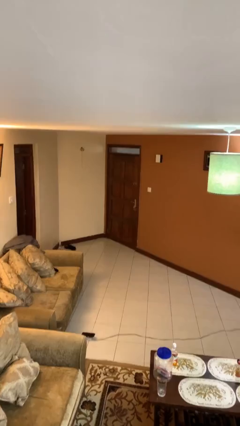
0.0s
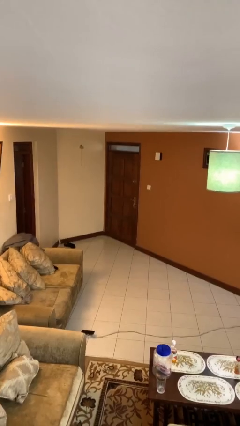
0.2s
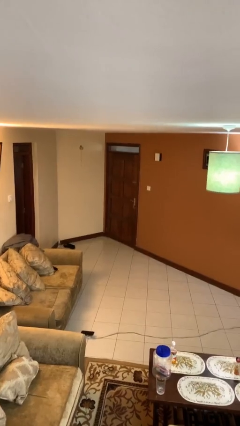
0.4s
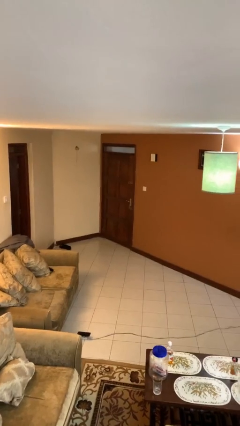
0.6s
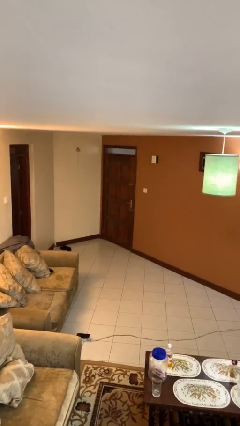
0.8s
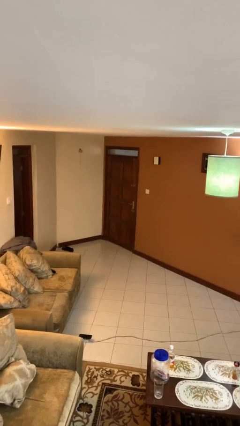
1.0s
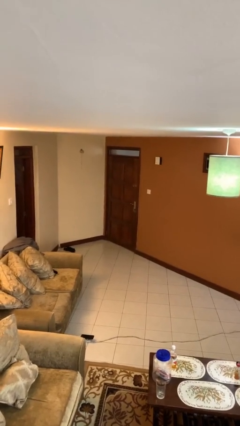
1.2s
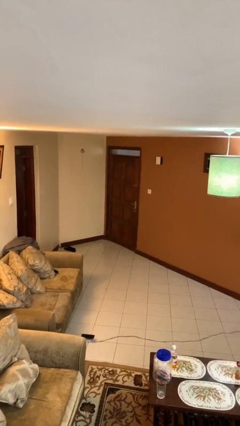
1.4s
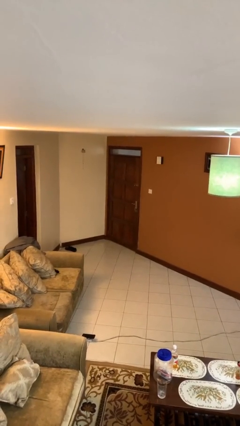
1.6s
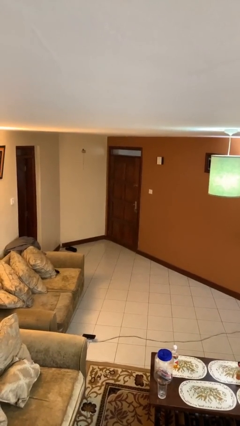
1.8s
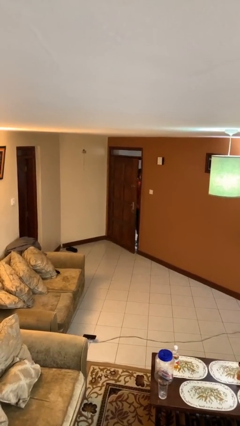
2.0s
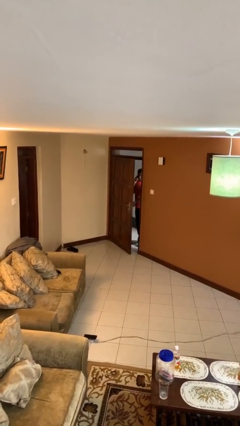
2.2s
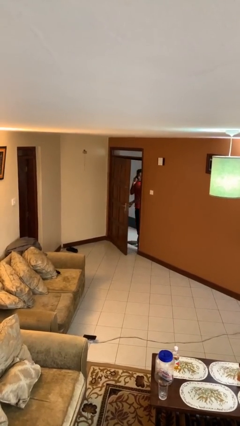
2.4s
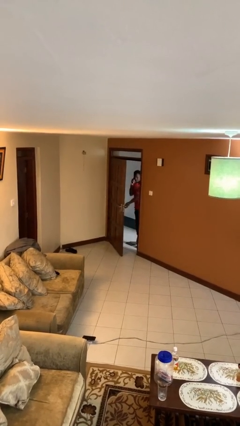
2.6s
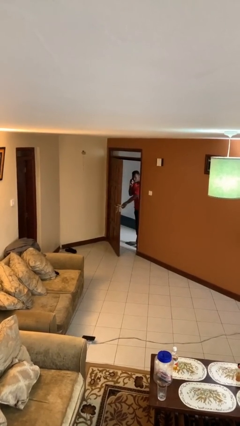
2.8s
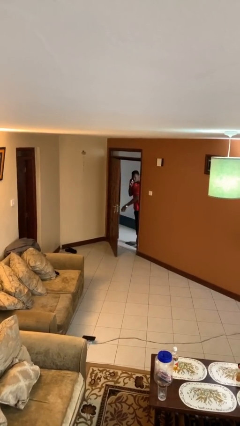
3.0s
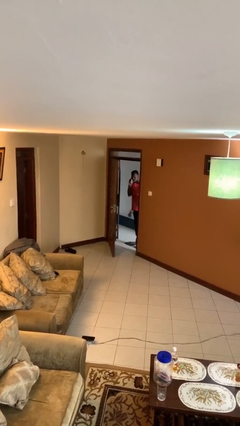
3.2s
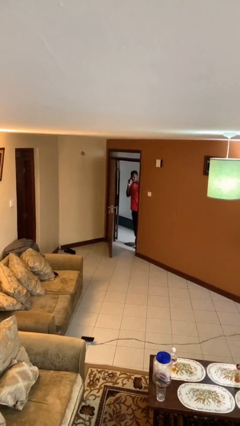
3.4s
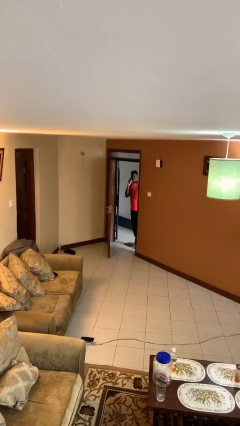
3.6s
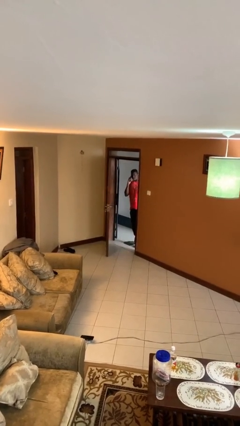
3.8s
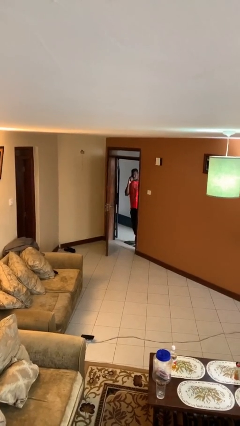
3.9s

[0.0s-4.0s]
person opens facility door

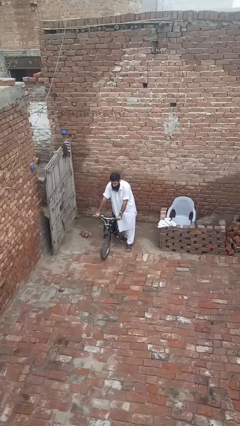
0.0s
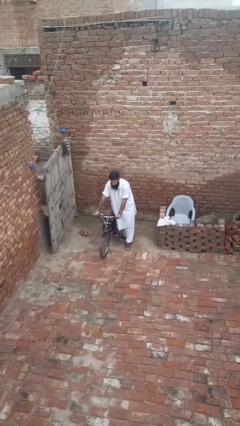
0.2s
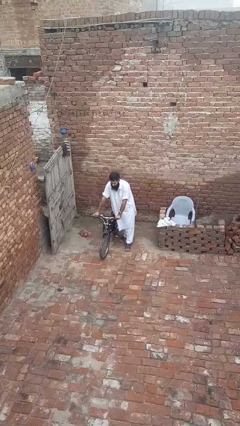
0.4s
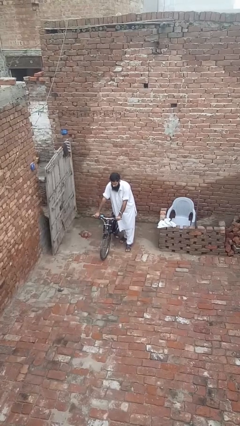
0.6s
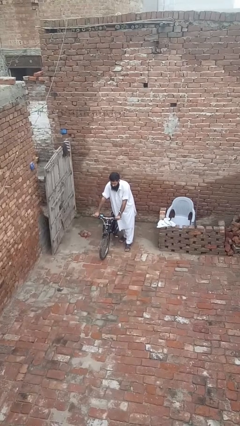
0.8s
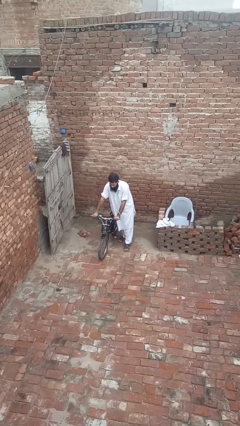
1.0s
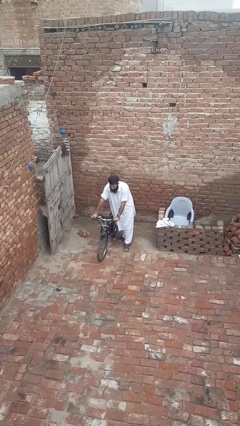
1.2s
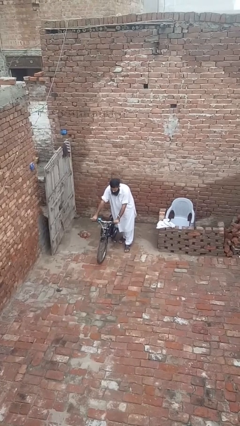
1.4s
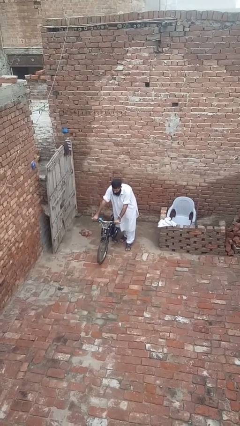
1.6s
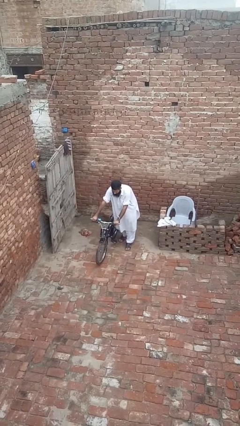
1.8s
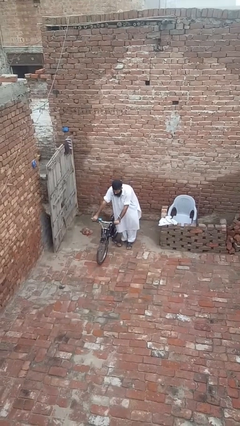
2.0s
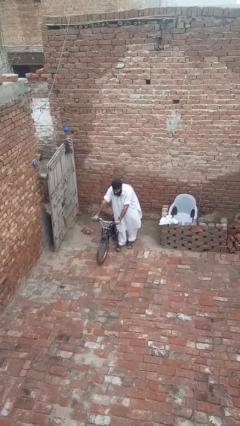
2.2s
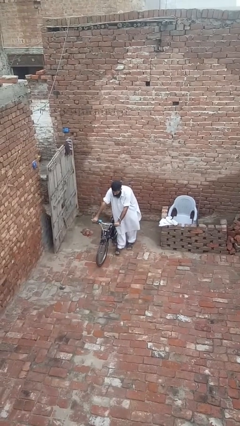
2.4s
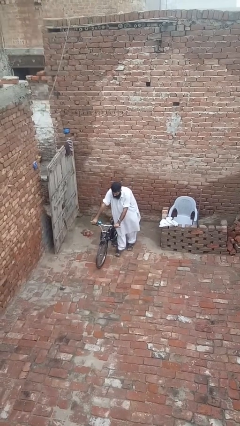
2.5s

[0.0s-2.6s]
person carries bicycle

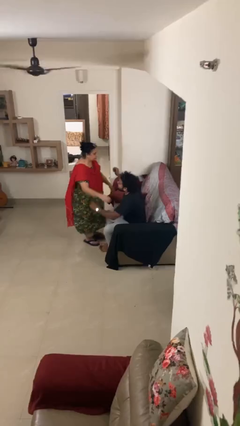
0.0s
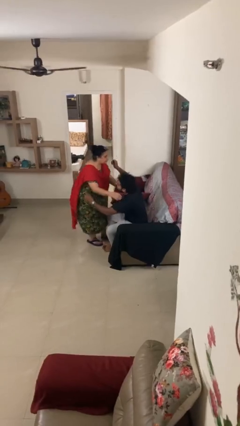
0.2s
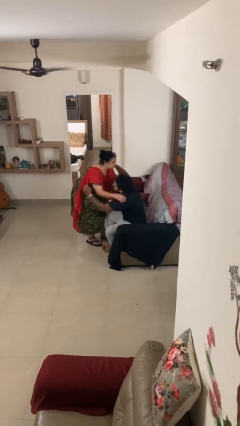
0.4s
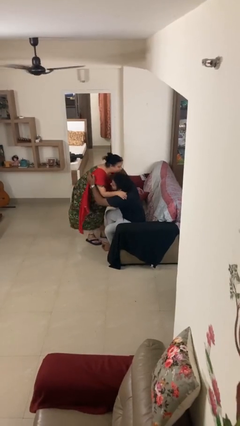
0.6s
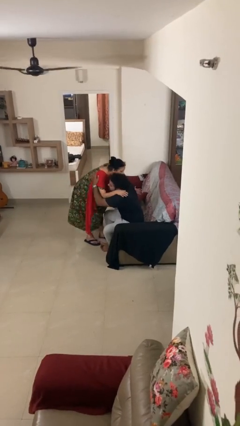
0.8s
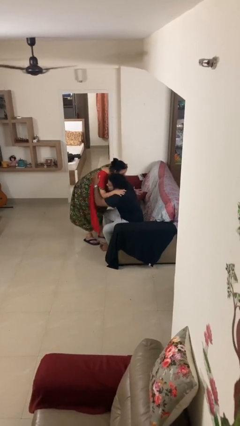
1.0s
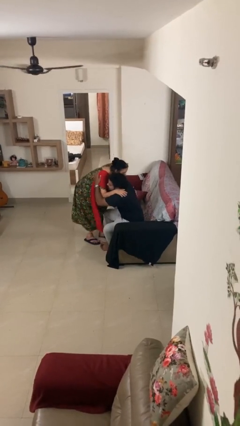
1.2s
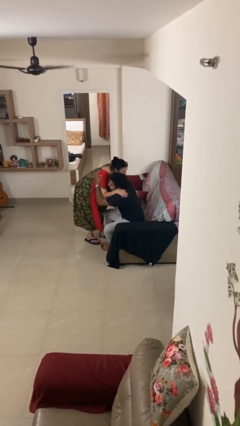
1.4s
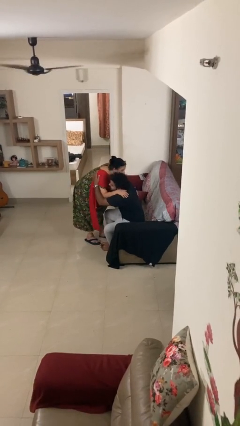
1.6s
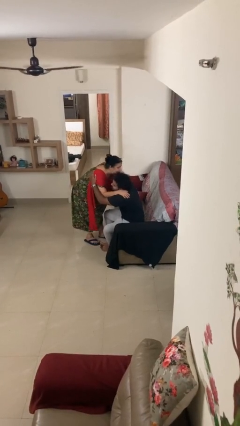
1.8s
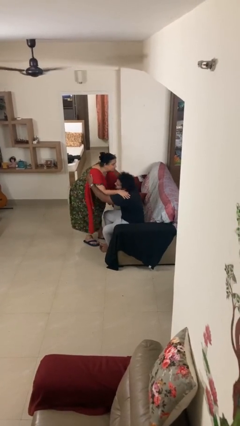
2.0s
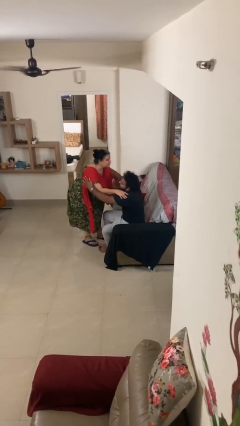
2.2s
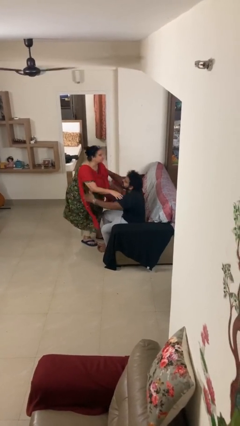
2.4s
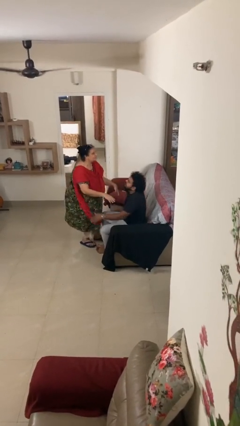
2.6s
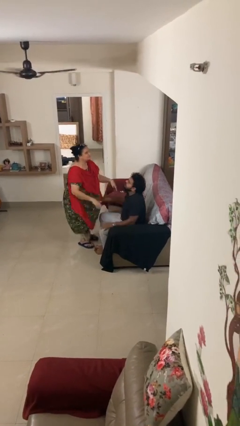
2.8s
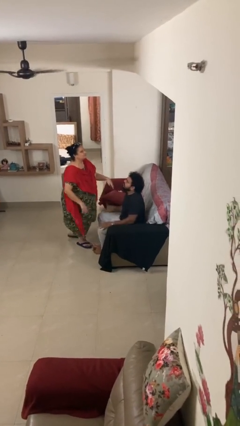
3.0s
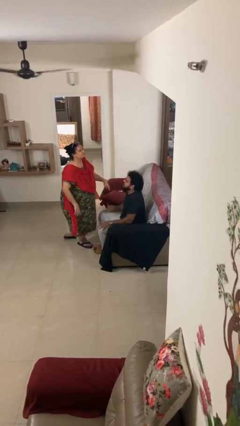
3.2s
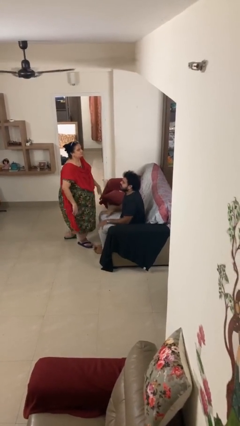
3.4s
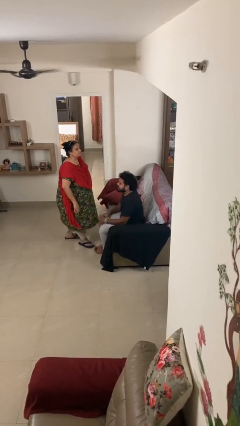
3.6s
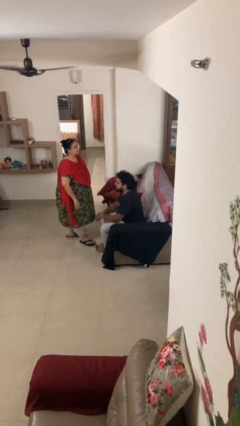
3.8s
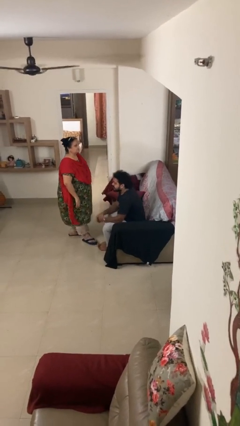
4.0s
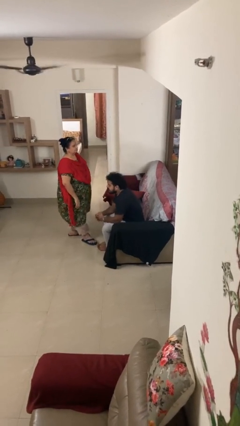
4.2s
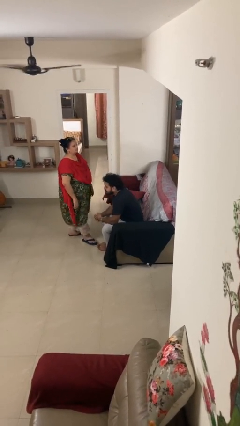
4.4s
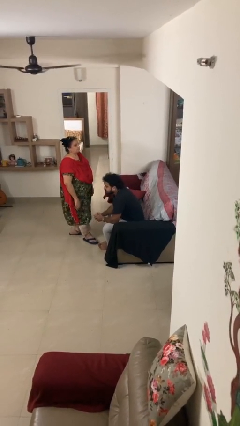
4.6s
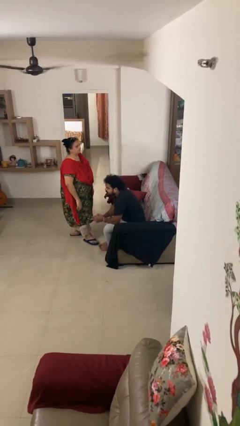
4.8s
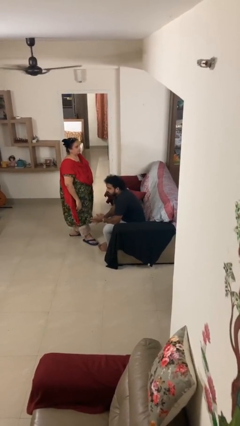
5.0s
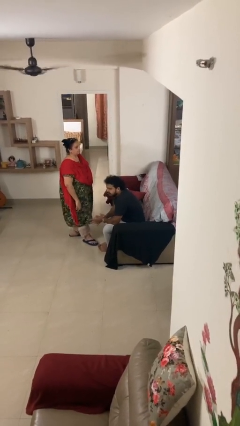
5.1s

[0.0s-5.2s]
person embraces person

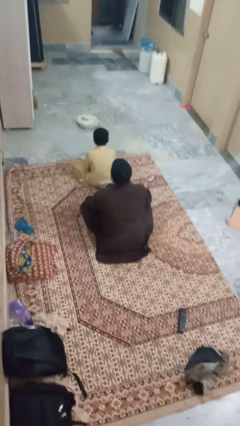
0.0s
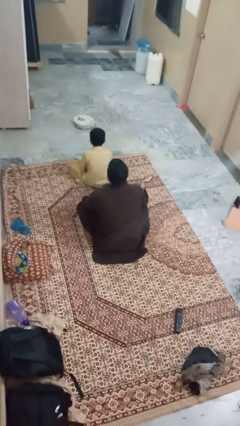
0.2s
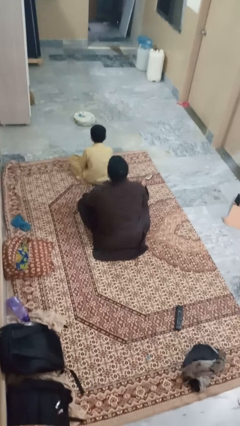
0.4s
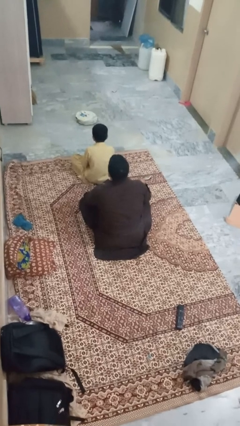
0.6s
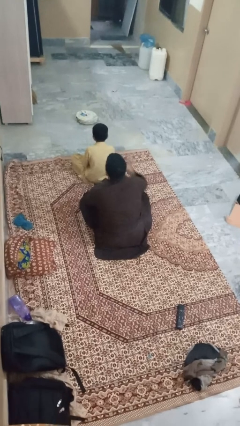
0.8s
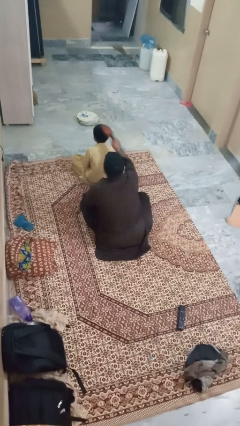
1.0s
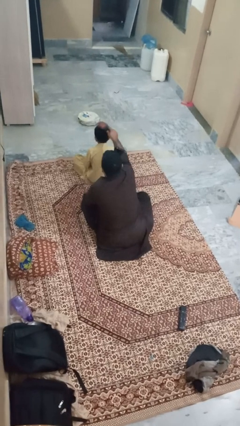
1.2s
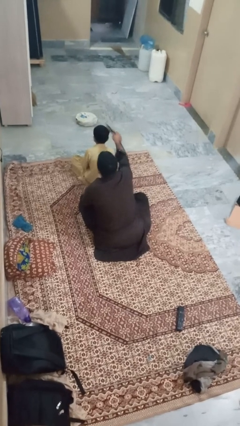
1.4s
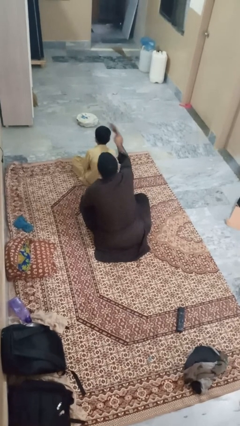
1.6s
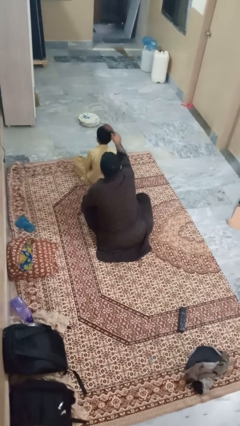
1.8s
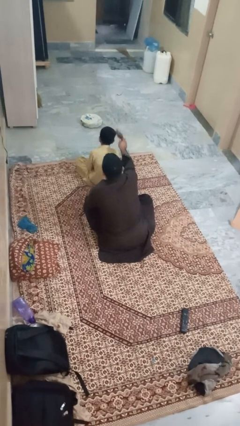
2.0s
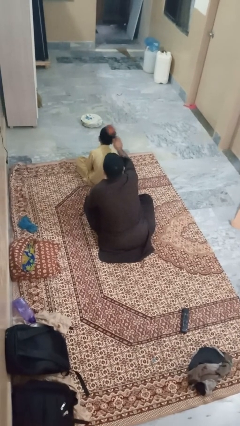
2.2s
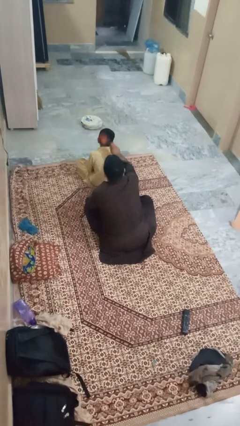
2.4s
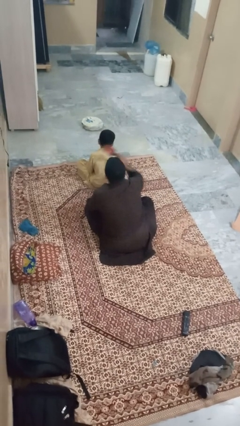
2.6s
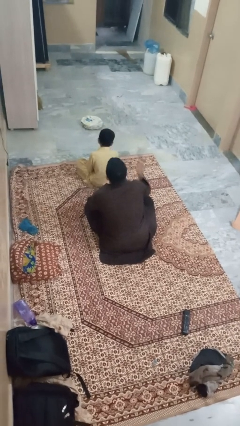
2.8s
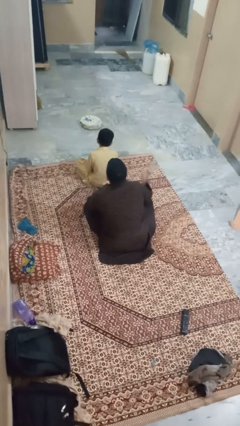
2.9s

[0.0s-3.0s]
person brushes hair of person

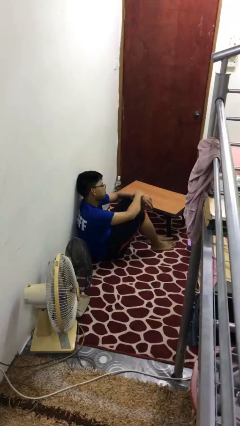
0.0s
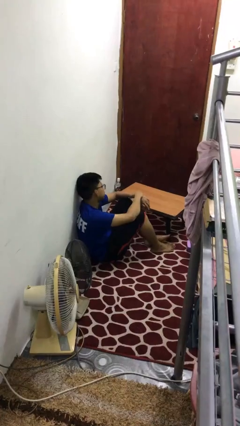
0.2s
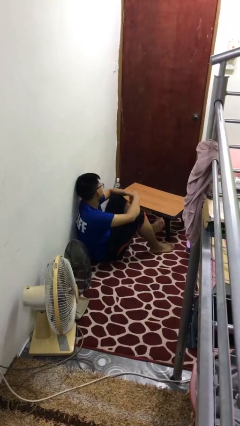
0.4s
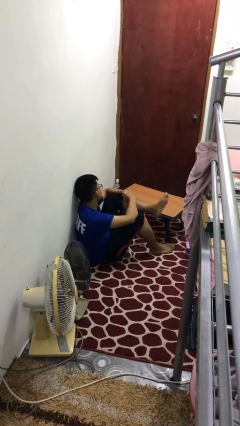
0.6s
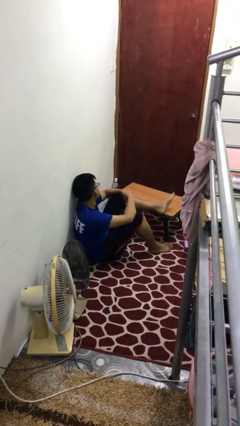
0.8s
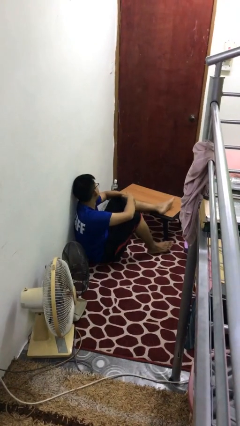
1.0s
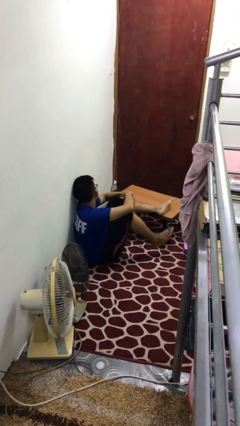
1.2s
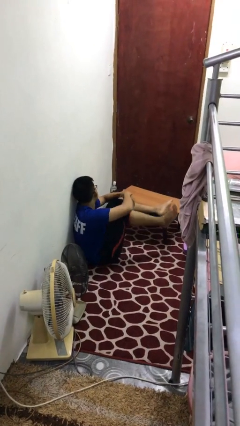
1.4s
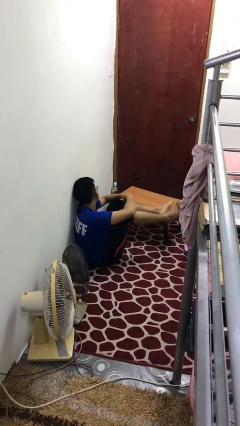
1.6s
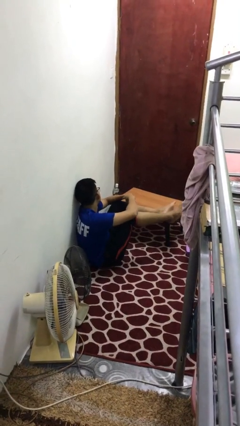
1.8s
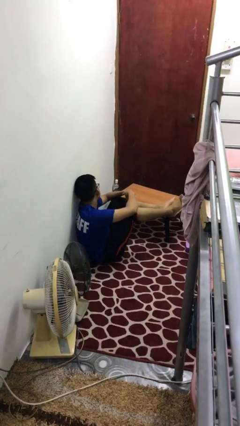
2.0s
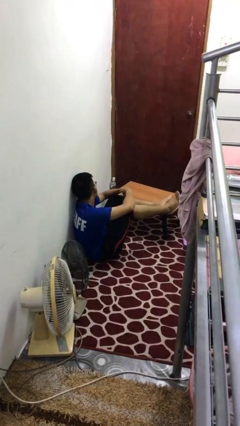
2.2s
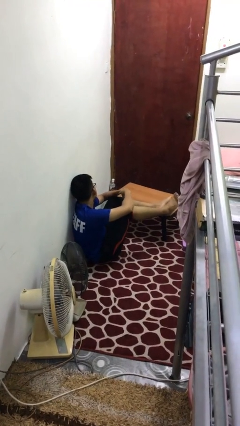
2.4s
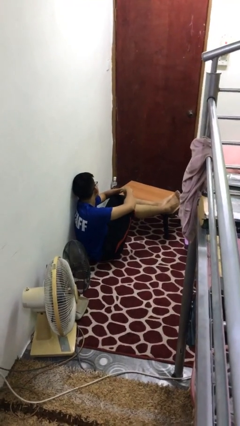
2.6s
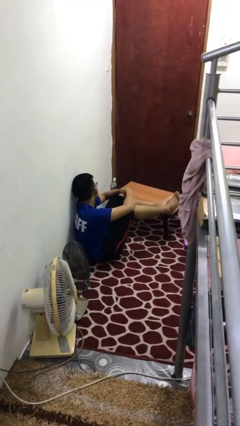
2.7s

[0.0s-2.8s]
person puts feet up
